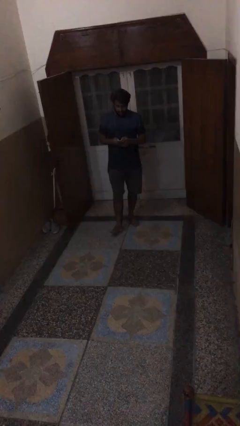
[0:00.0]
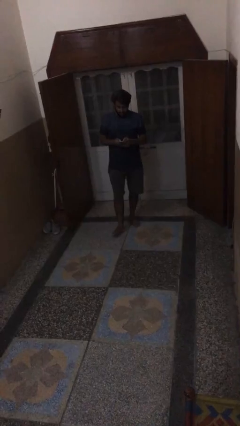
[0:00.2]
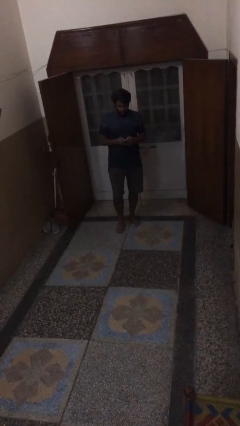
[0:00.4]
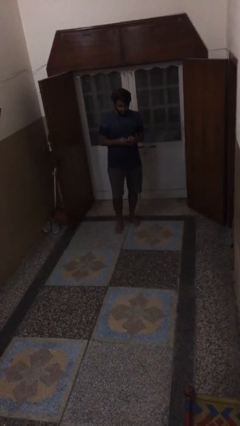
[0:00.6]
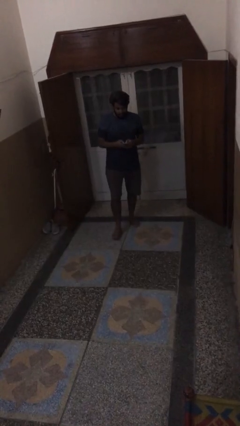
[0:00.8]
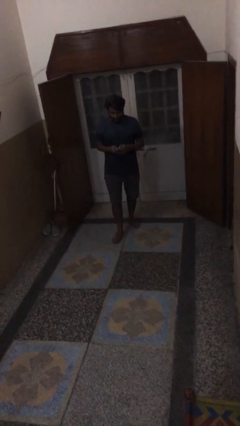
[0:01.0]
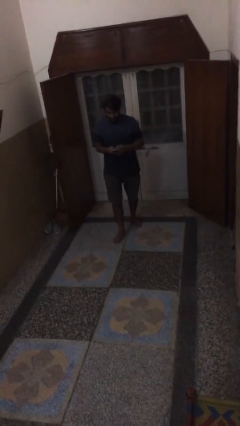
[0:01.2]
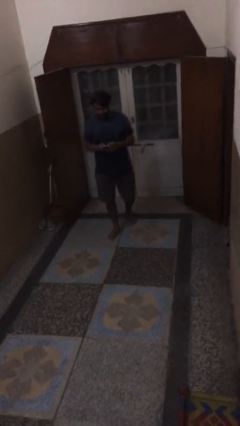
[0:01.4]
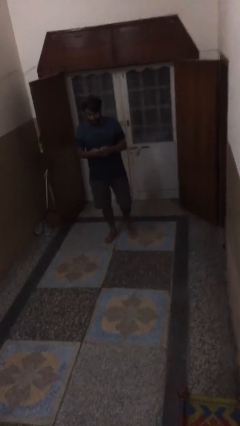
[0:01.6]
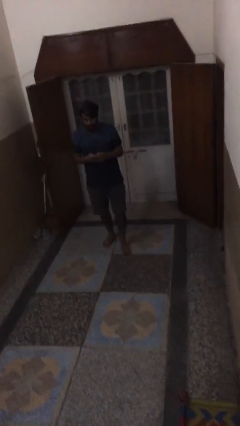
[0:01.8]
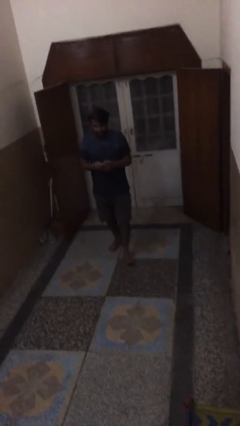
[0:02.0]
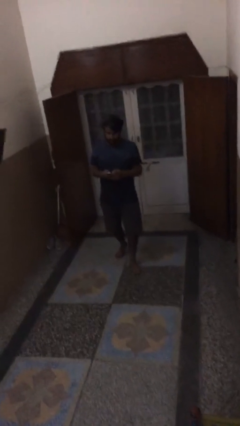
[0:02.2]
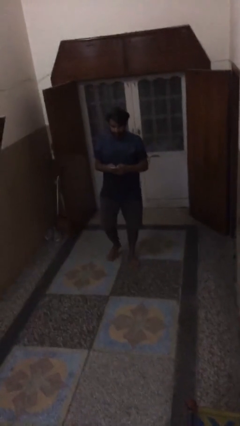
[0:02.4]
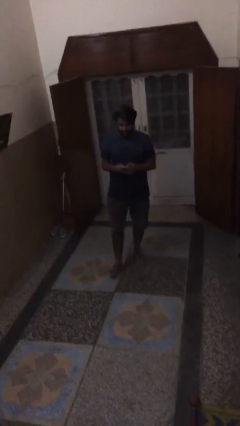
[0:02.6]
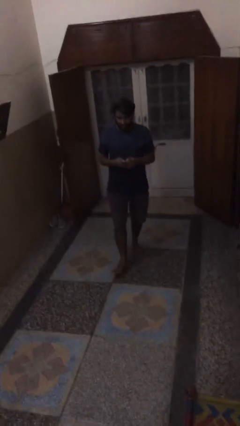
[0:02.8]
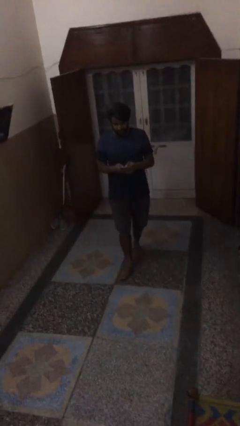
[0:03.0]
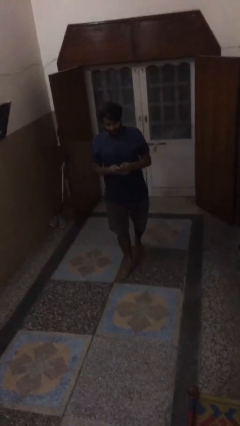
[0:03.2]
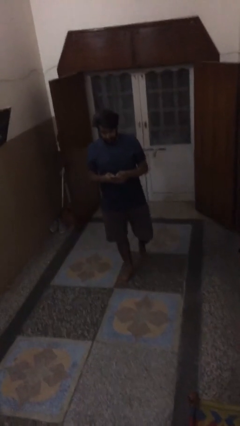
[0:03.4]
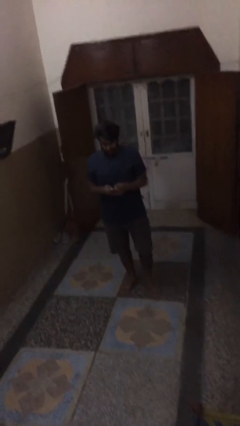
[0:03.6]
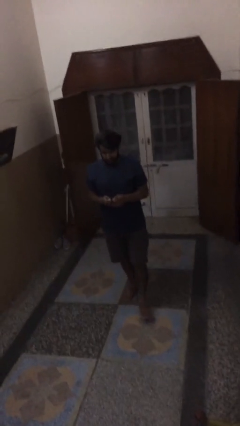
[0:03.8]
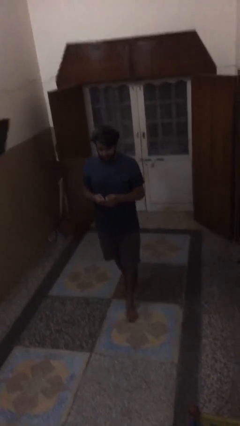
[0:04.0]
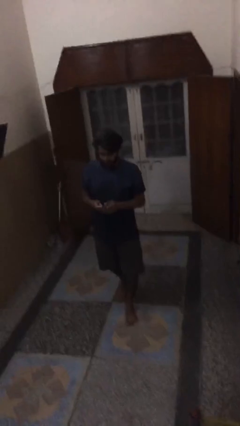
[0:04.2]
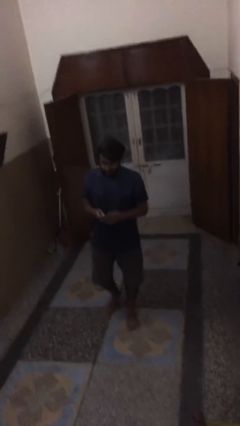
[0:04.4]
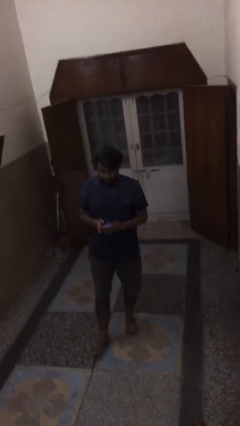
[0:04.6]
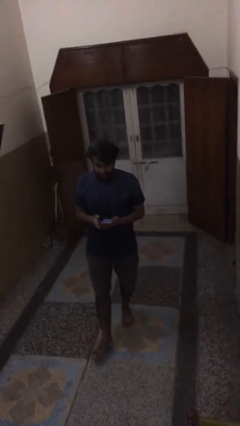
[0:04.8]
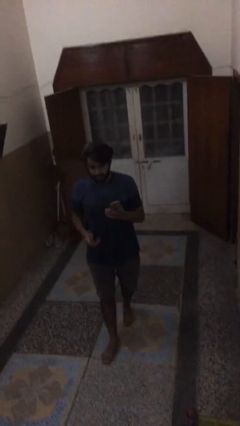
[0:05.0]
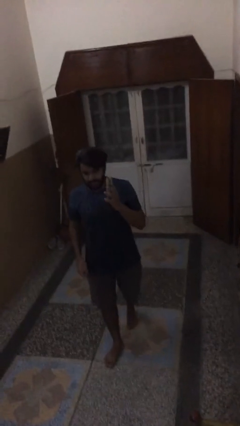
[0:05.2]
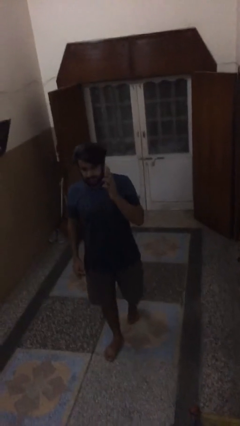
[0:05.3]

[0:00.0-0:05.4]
person texts on phone

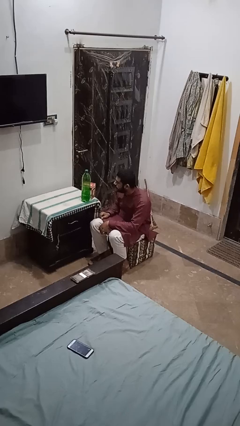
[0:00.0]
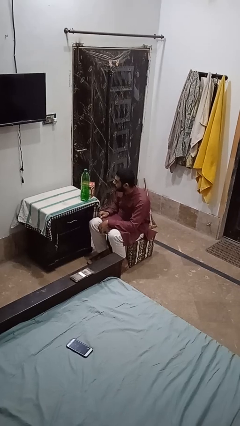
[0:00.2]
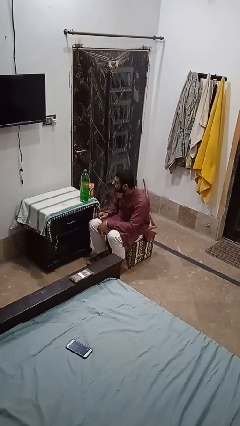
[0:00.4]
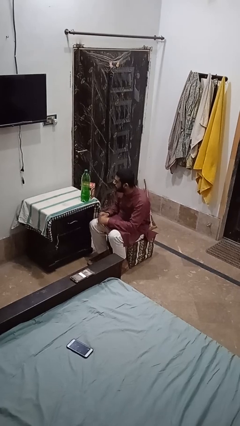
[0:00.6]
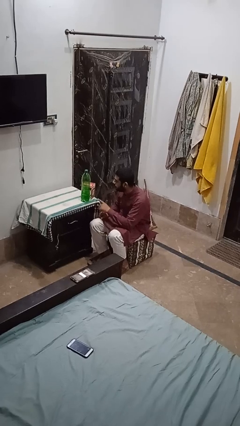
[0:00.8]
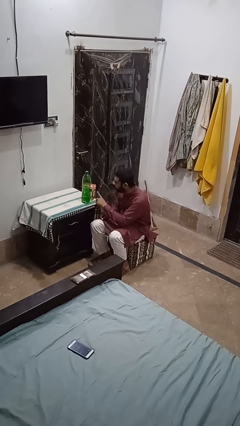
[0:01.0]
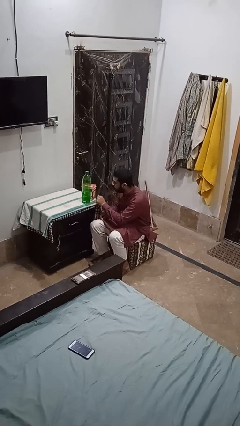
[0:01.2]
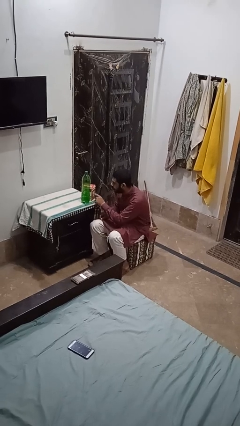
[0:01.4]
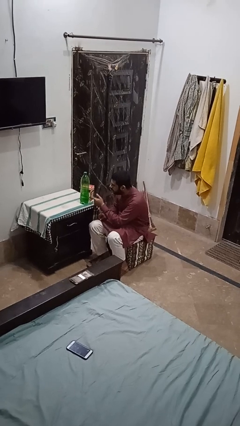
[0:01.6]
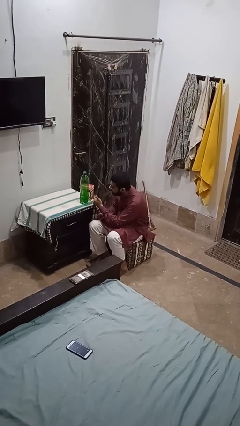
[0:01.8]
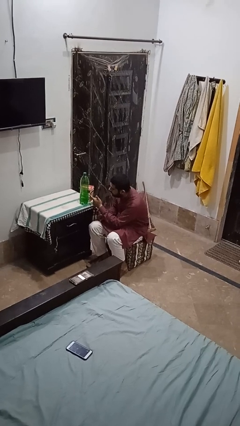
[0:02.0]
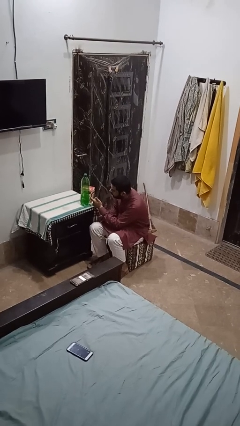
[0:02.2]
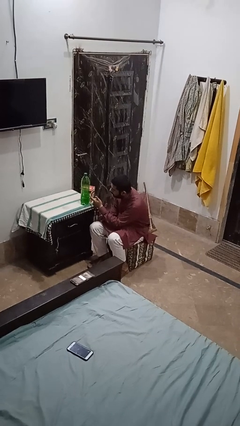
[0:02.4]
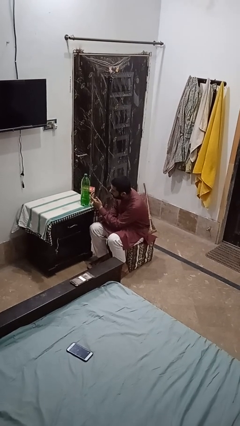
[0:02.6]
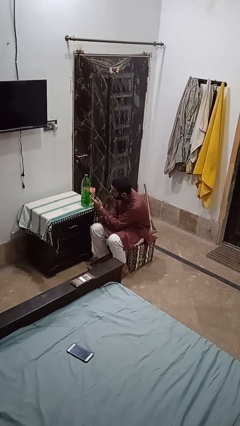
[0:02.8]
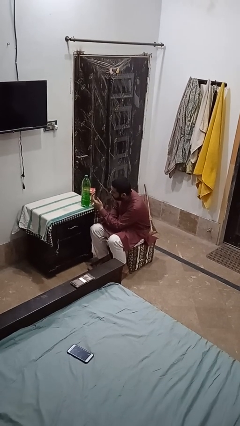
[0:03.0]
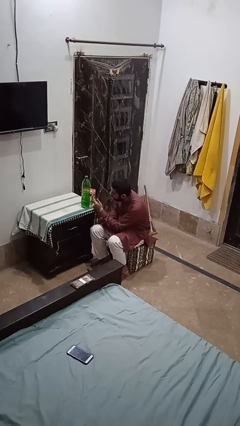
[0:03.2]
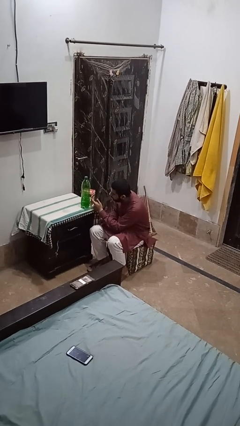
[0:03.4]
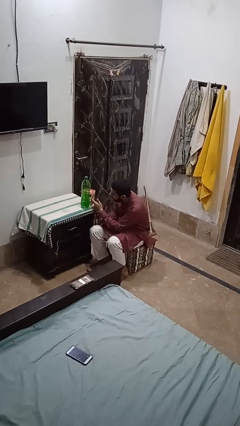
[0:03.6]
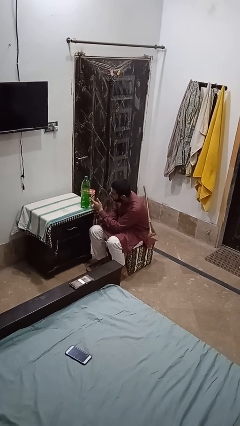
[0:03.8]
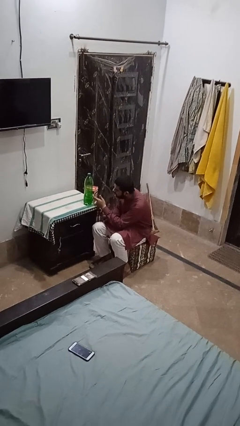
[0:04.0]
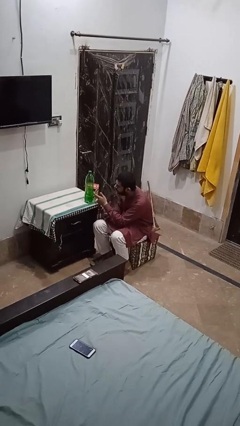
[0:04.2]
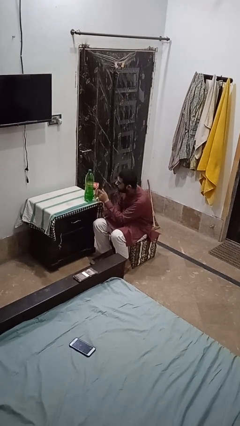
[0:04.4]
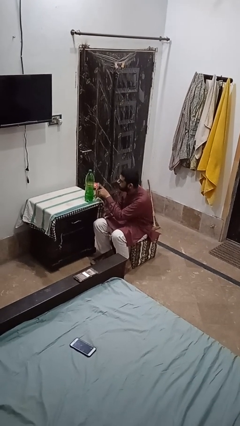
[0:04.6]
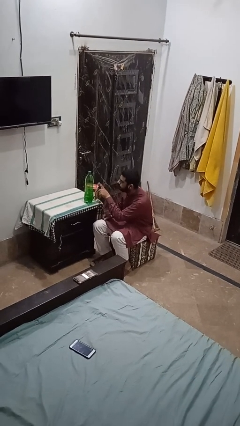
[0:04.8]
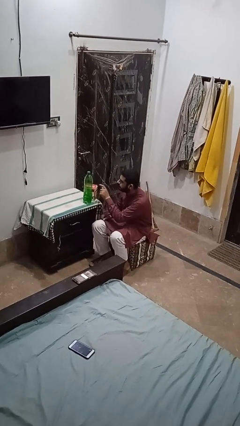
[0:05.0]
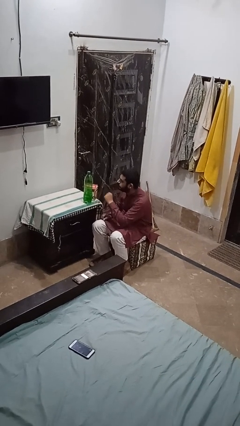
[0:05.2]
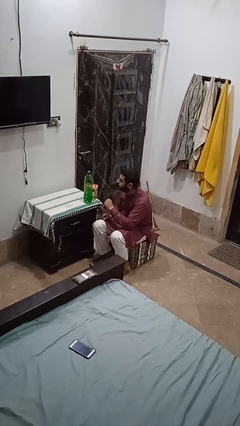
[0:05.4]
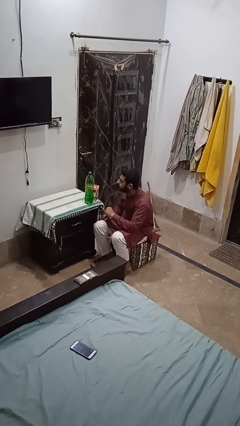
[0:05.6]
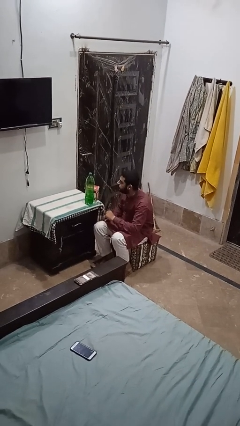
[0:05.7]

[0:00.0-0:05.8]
person taps object with finger

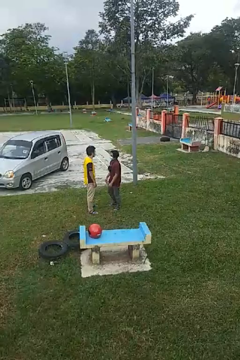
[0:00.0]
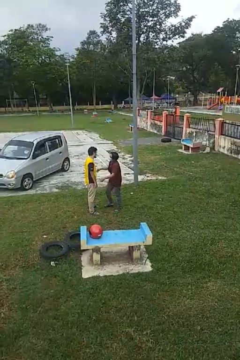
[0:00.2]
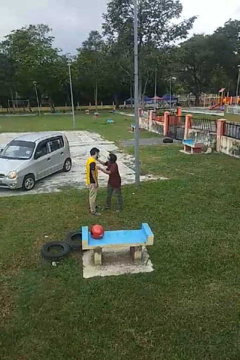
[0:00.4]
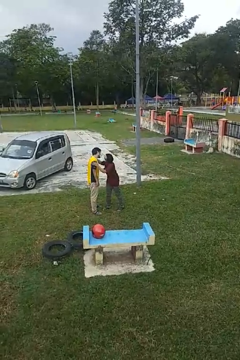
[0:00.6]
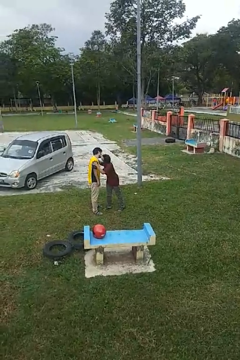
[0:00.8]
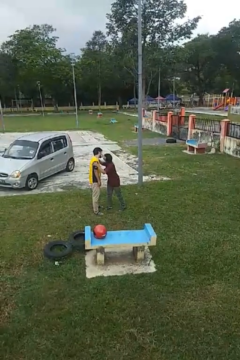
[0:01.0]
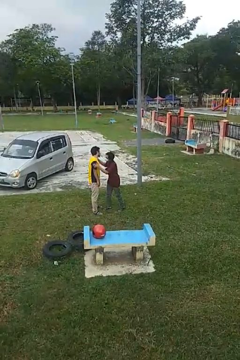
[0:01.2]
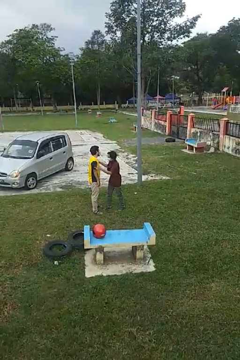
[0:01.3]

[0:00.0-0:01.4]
person kisses cheek of person

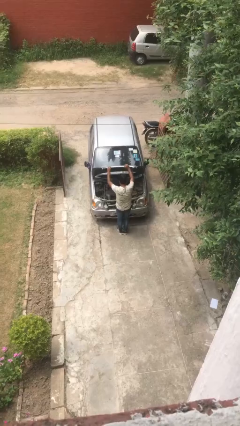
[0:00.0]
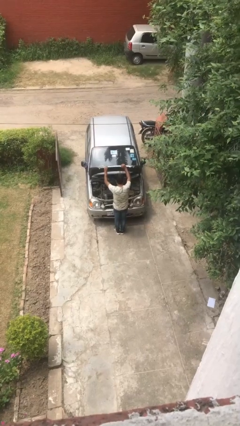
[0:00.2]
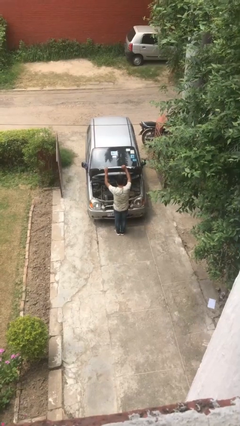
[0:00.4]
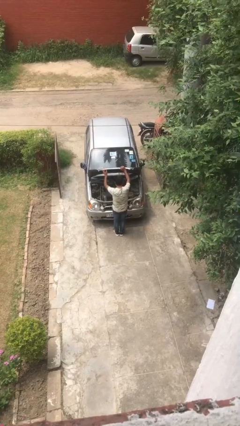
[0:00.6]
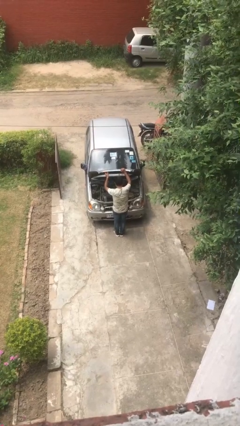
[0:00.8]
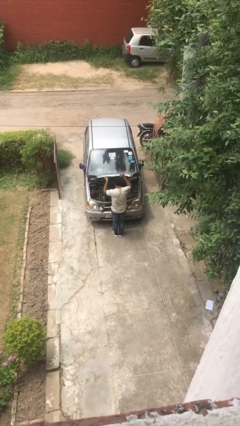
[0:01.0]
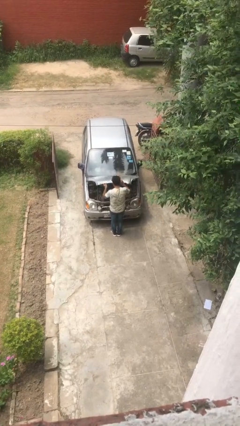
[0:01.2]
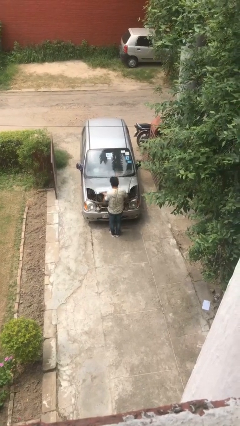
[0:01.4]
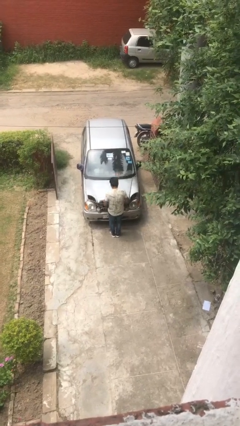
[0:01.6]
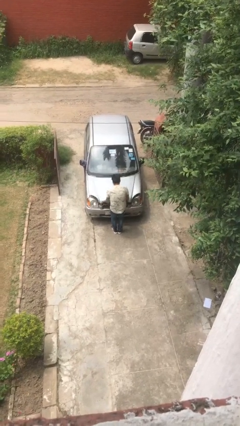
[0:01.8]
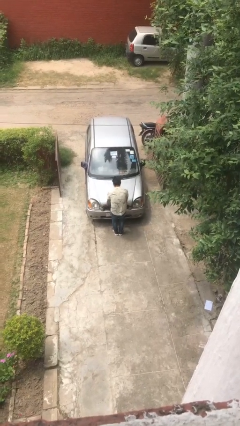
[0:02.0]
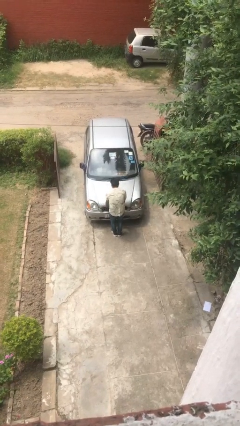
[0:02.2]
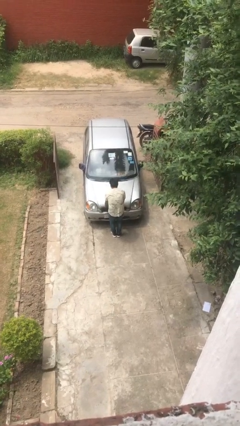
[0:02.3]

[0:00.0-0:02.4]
person closes car hood

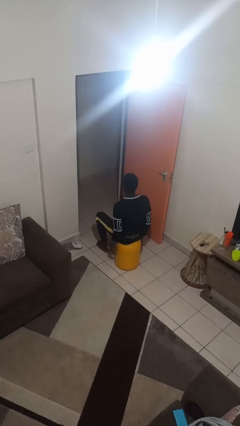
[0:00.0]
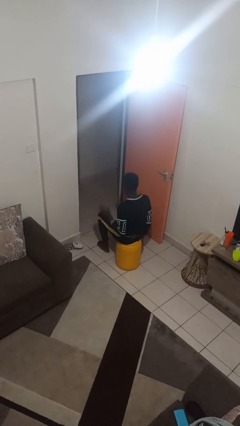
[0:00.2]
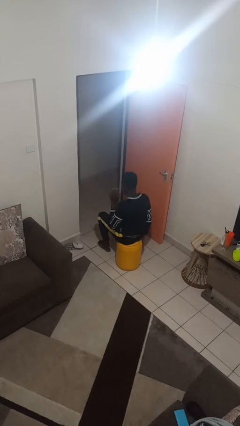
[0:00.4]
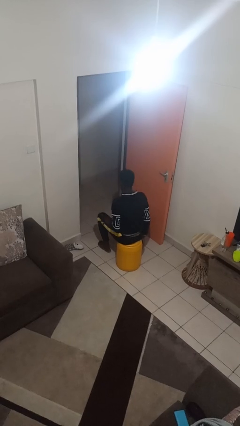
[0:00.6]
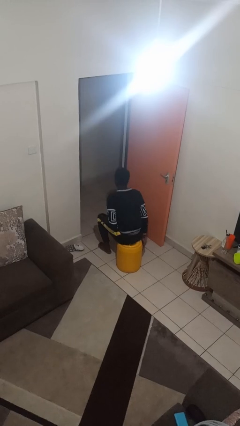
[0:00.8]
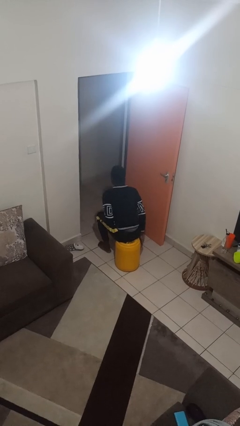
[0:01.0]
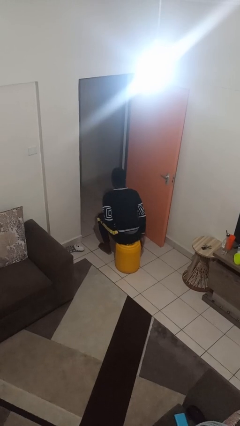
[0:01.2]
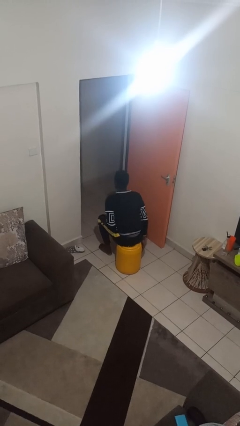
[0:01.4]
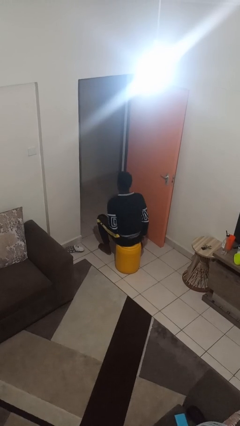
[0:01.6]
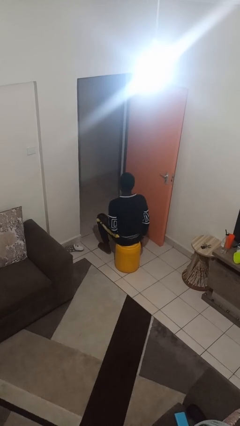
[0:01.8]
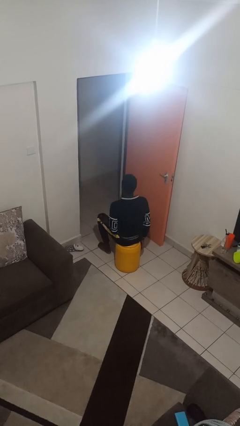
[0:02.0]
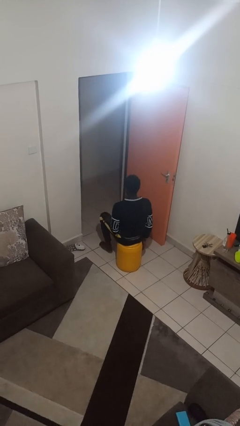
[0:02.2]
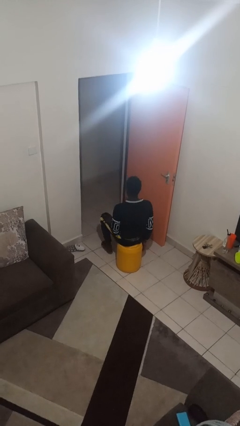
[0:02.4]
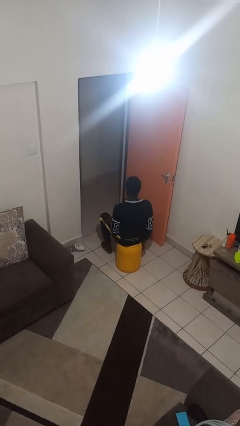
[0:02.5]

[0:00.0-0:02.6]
person slaps hands on thighs

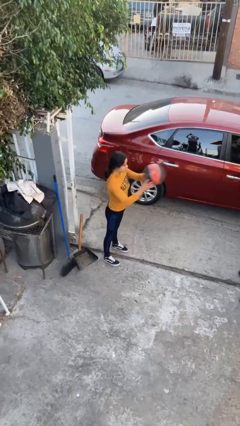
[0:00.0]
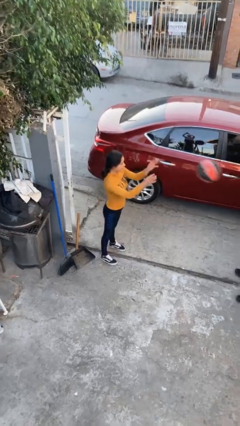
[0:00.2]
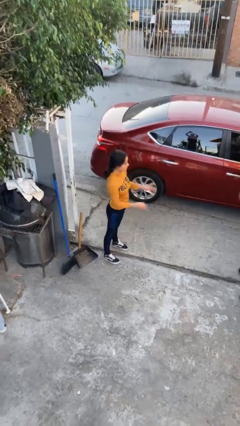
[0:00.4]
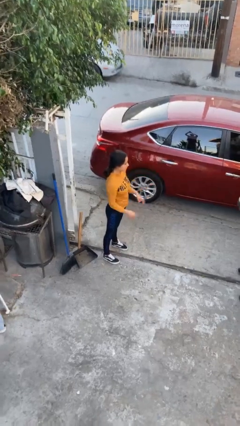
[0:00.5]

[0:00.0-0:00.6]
person throws object to person
